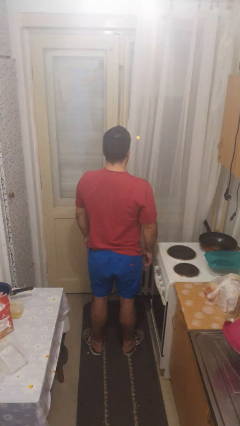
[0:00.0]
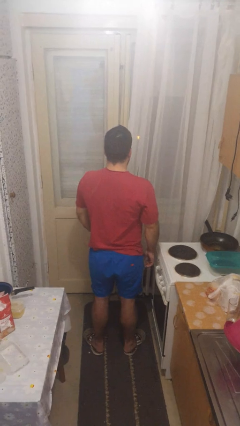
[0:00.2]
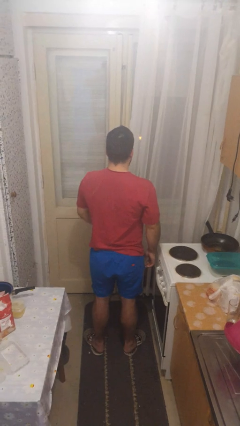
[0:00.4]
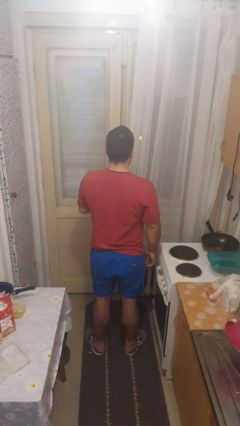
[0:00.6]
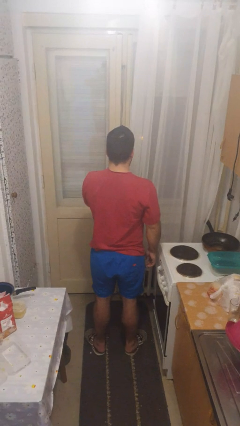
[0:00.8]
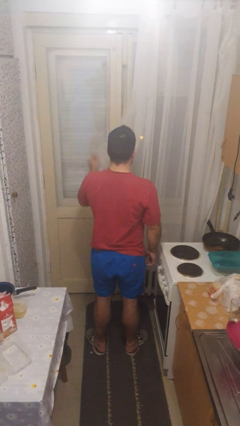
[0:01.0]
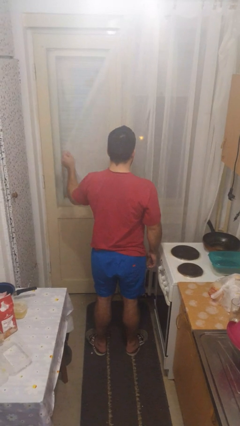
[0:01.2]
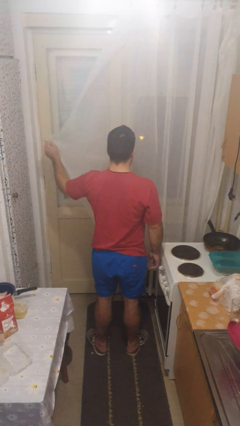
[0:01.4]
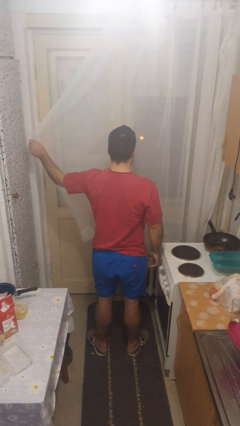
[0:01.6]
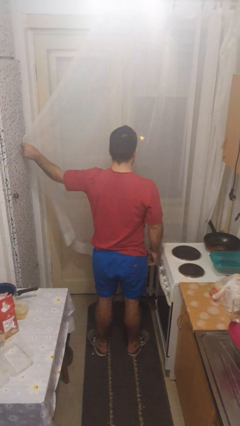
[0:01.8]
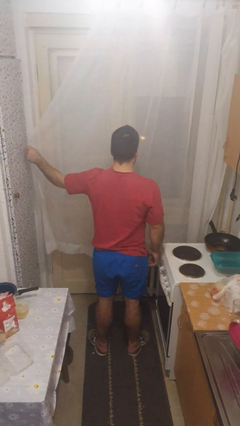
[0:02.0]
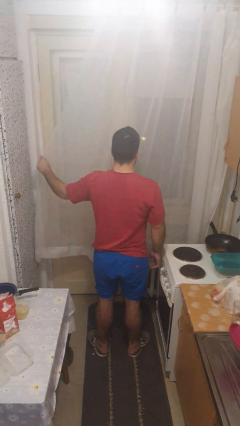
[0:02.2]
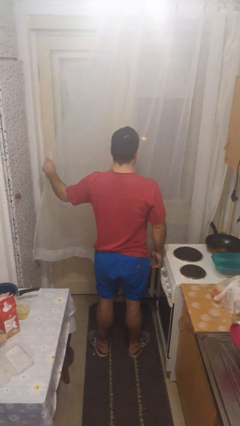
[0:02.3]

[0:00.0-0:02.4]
person closes curtains

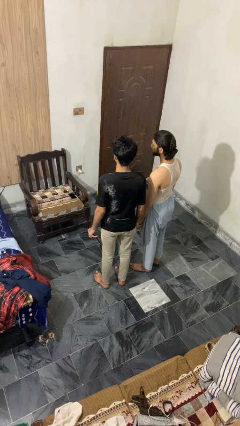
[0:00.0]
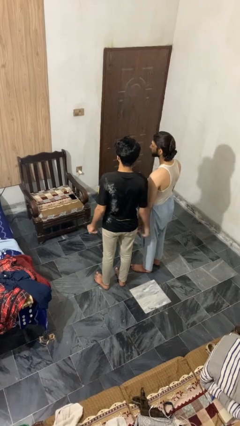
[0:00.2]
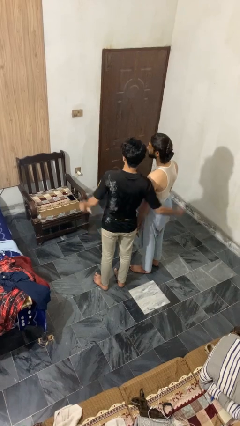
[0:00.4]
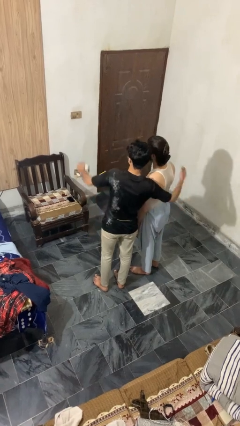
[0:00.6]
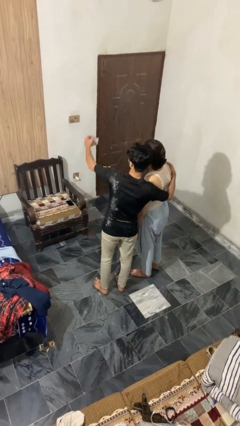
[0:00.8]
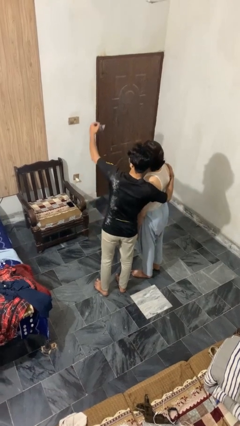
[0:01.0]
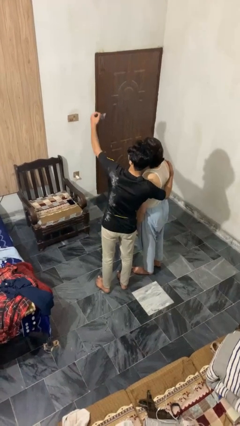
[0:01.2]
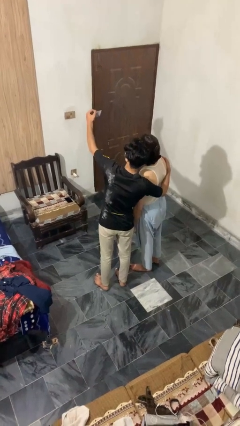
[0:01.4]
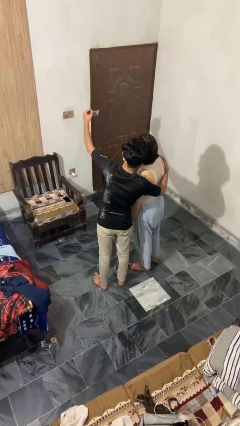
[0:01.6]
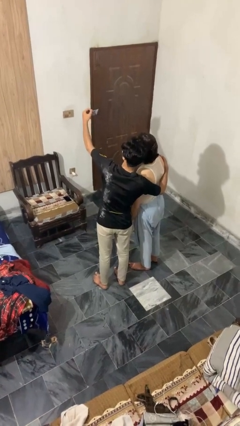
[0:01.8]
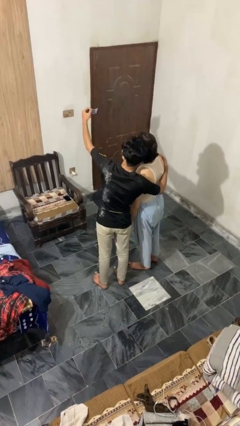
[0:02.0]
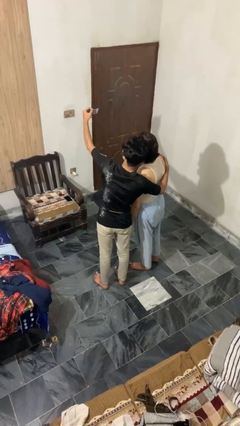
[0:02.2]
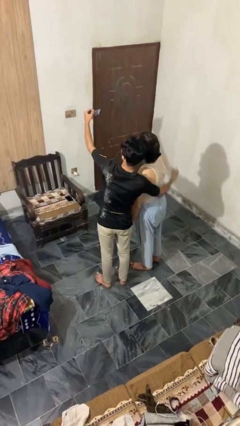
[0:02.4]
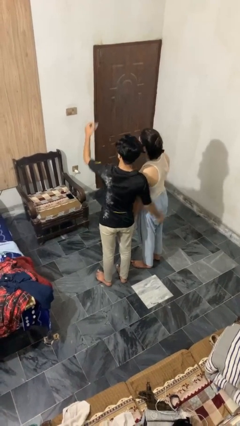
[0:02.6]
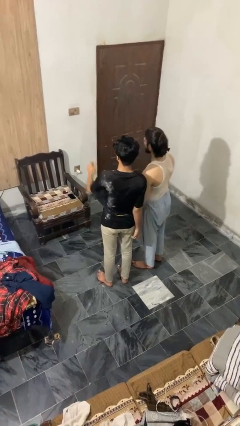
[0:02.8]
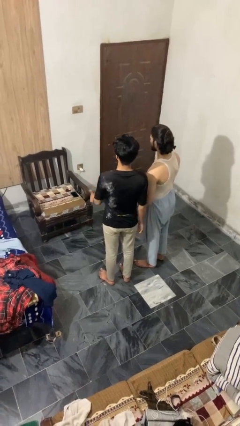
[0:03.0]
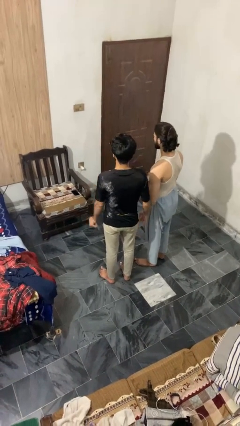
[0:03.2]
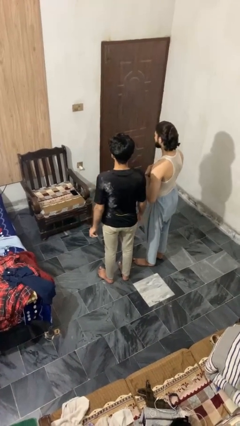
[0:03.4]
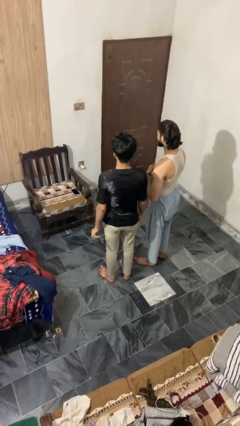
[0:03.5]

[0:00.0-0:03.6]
person takes selfie with person

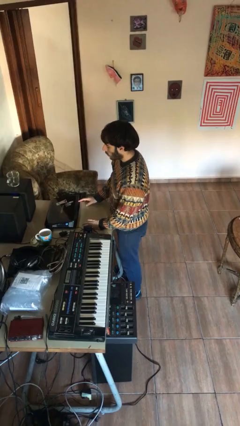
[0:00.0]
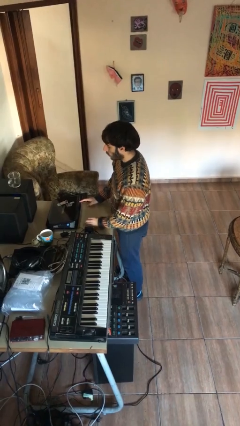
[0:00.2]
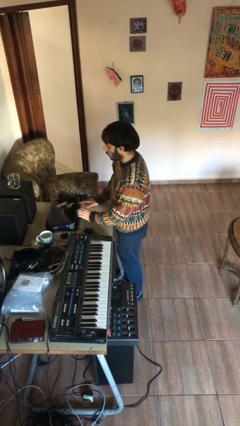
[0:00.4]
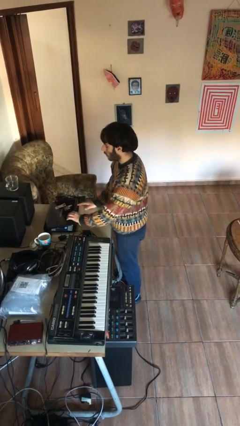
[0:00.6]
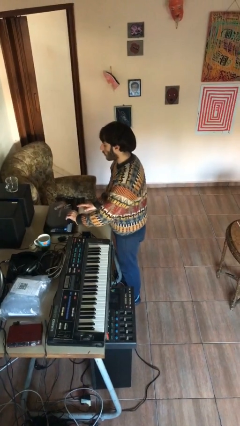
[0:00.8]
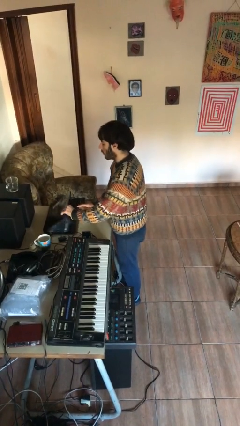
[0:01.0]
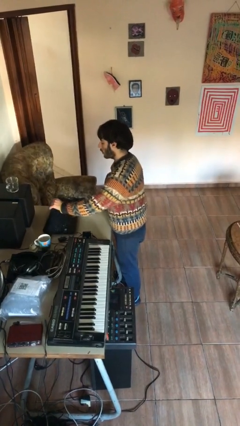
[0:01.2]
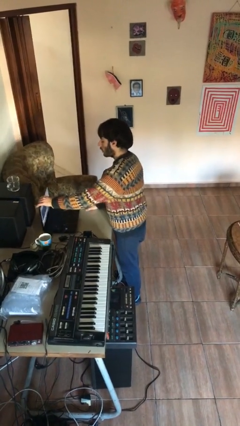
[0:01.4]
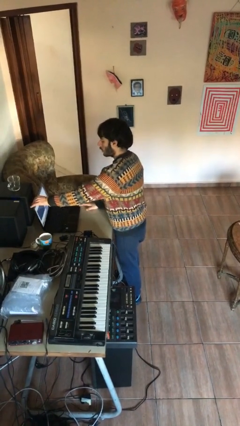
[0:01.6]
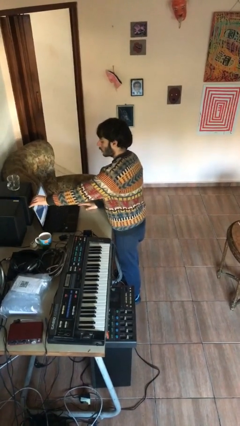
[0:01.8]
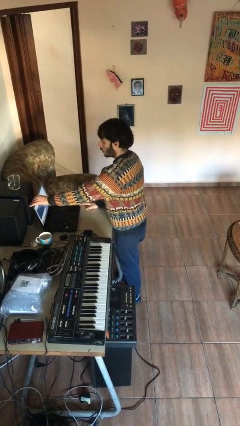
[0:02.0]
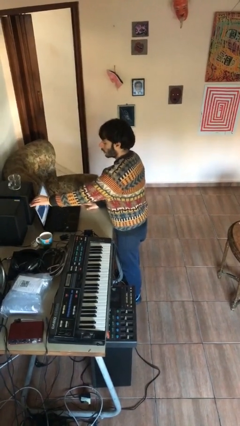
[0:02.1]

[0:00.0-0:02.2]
person opens laptop

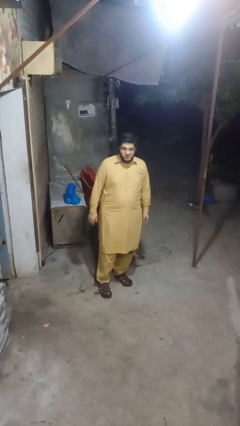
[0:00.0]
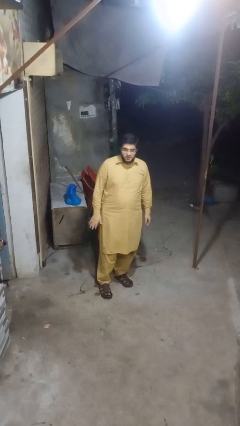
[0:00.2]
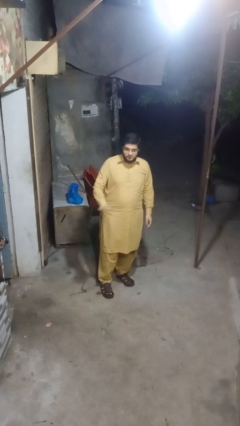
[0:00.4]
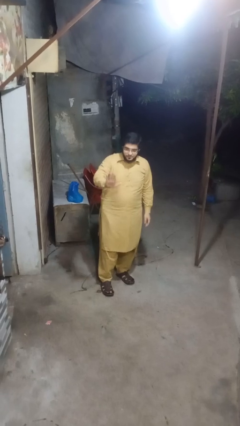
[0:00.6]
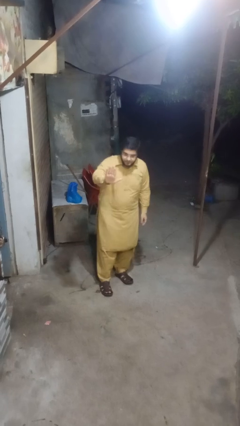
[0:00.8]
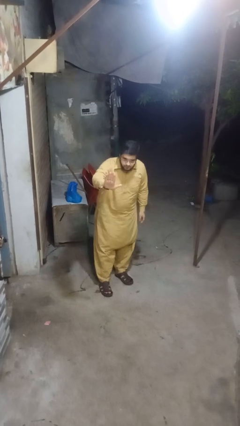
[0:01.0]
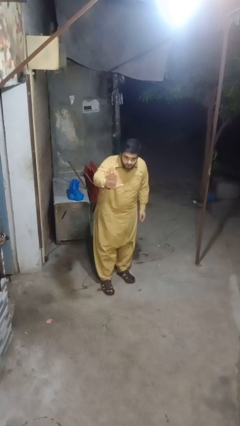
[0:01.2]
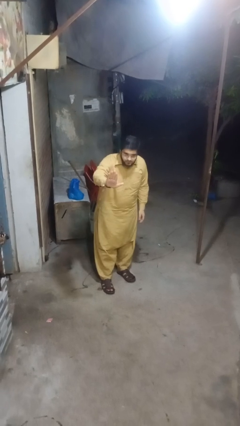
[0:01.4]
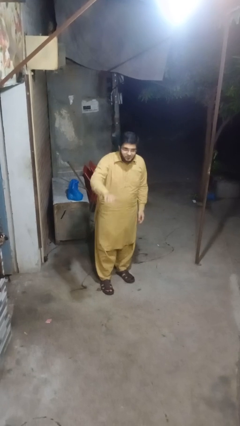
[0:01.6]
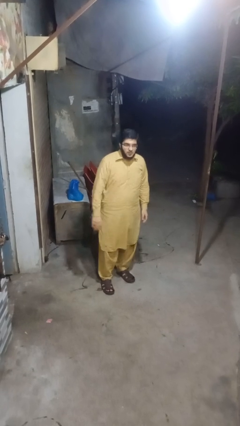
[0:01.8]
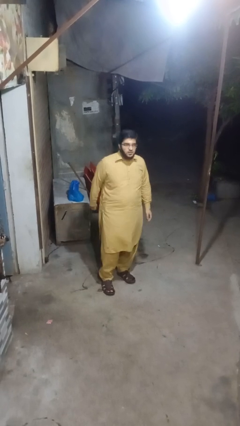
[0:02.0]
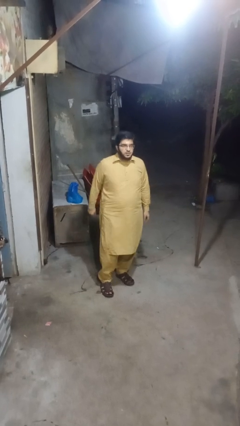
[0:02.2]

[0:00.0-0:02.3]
person gestures stop

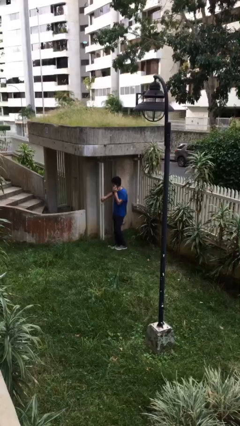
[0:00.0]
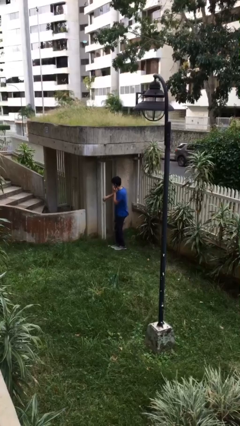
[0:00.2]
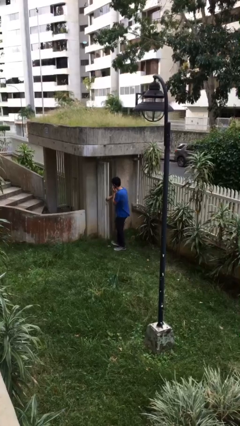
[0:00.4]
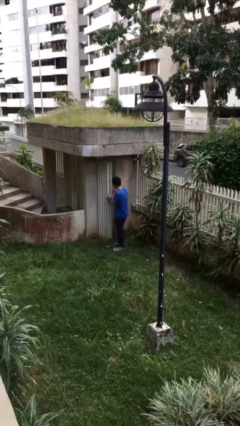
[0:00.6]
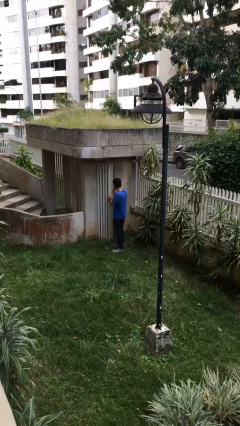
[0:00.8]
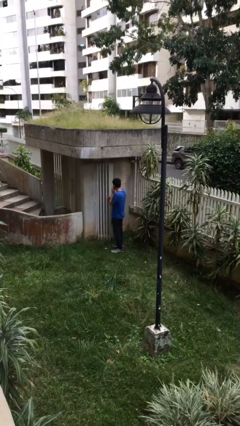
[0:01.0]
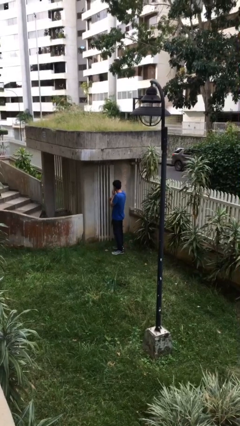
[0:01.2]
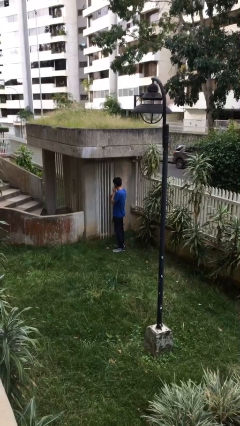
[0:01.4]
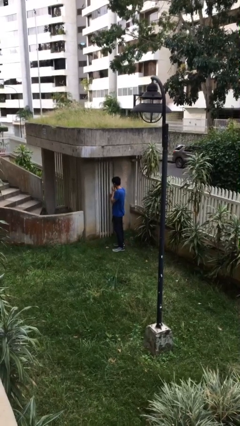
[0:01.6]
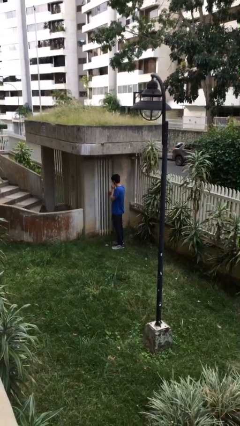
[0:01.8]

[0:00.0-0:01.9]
person closes facility door

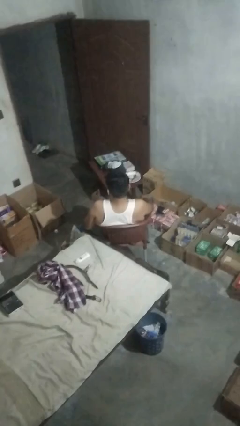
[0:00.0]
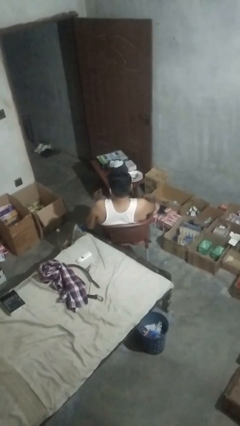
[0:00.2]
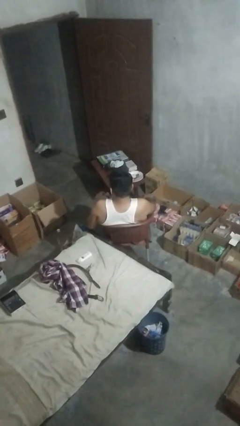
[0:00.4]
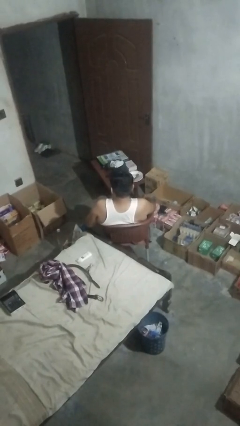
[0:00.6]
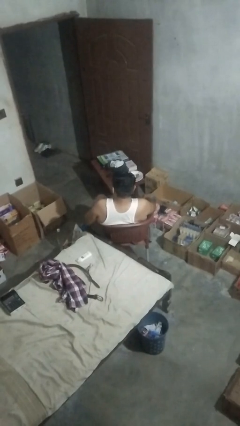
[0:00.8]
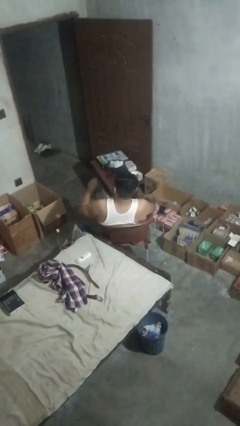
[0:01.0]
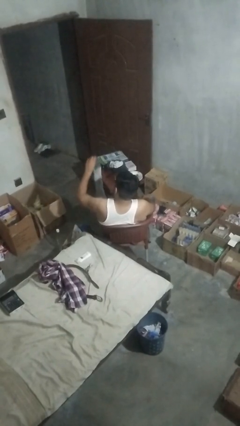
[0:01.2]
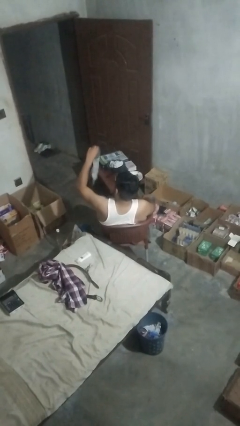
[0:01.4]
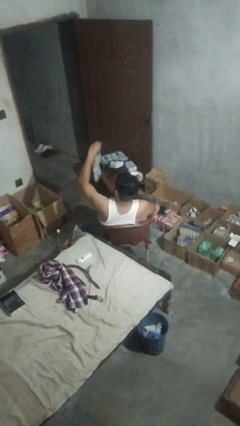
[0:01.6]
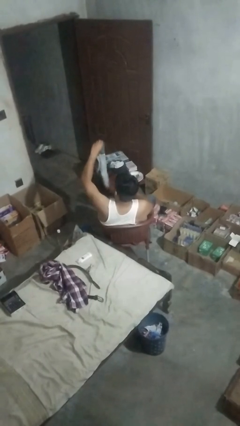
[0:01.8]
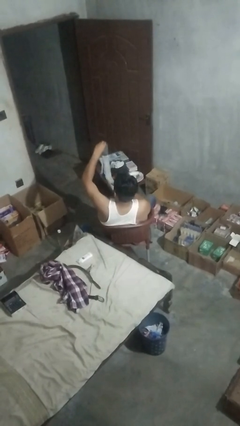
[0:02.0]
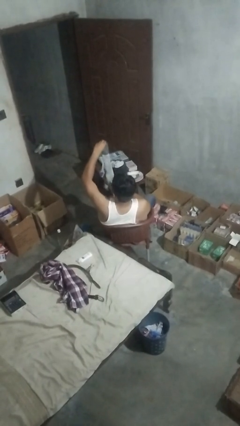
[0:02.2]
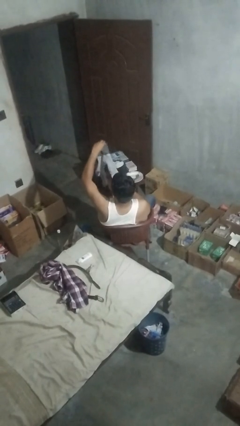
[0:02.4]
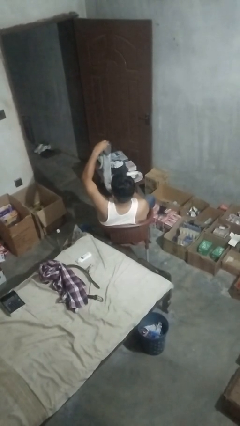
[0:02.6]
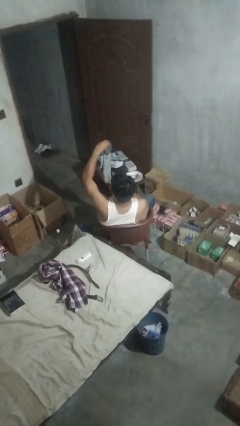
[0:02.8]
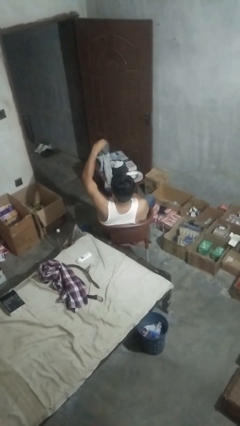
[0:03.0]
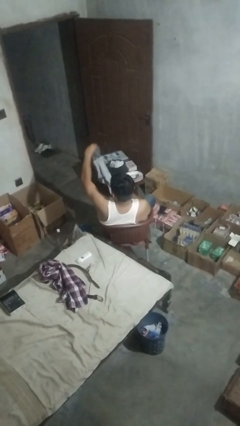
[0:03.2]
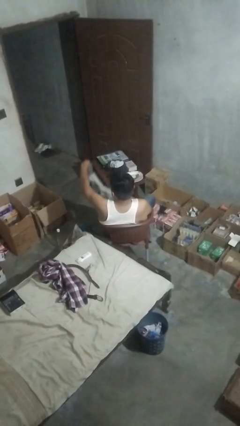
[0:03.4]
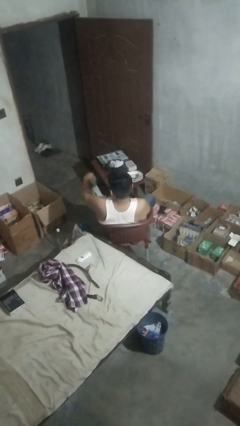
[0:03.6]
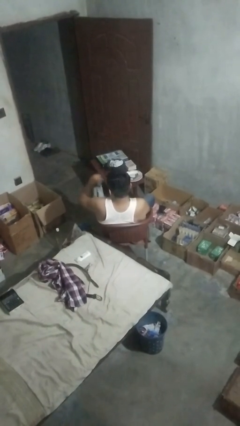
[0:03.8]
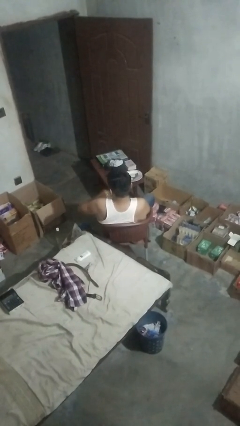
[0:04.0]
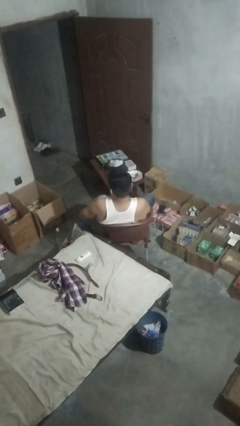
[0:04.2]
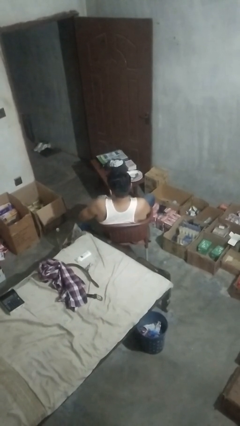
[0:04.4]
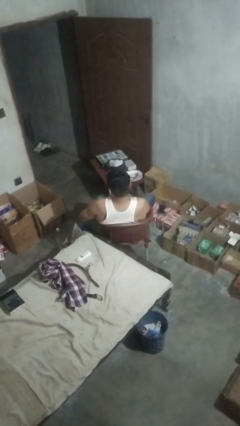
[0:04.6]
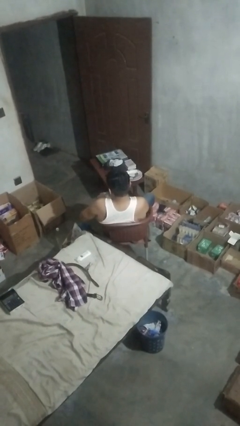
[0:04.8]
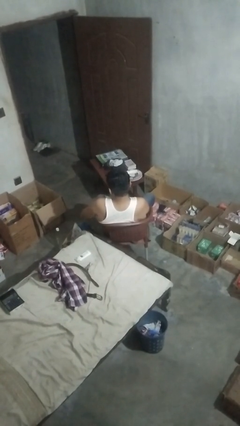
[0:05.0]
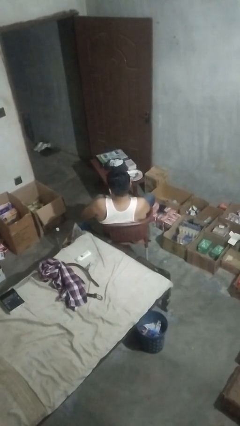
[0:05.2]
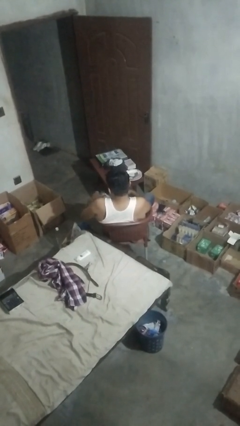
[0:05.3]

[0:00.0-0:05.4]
person folds socks
